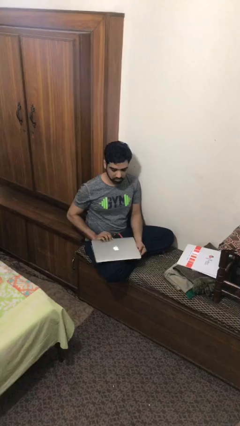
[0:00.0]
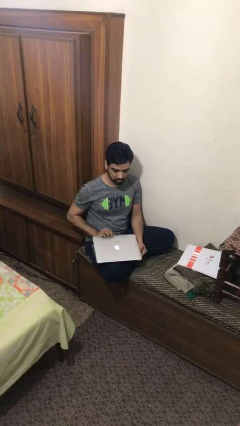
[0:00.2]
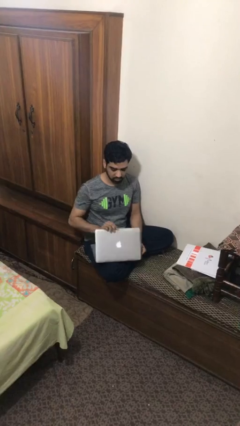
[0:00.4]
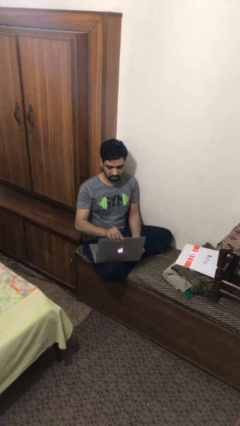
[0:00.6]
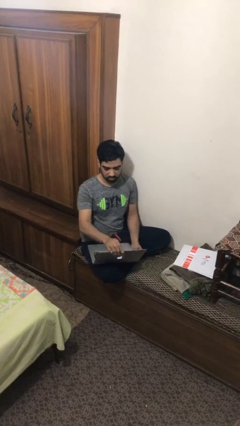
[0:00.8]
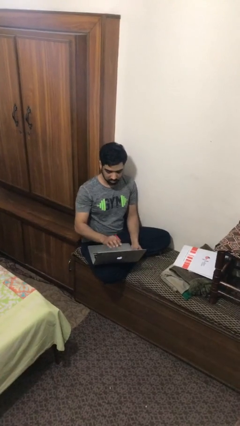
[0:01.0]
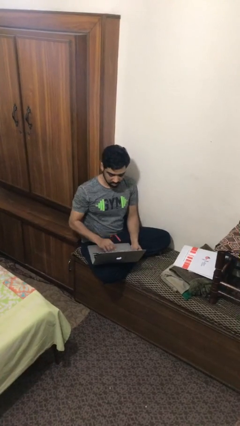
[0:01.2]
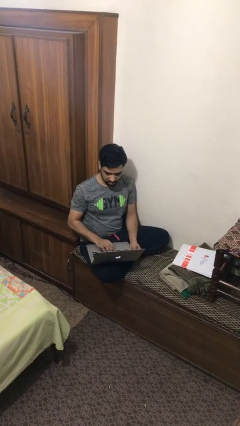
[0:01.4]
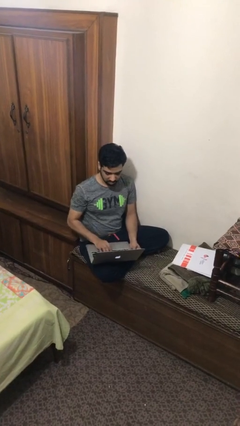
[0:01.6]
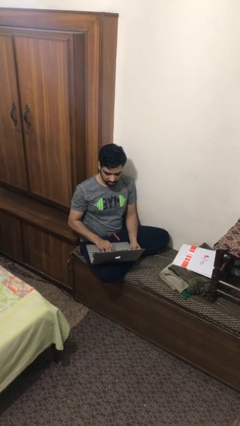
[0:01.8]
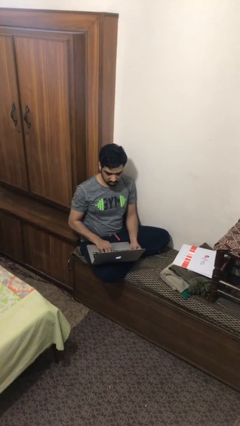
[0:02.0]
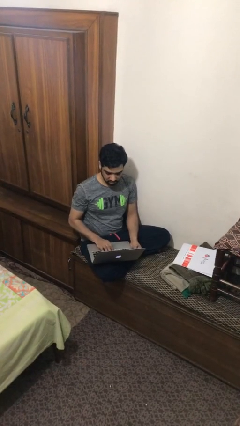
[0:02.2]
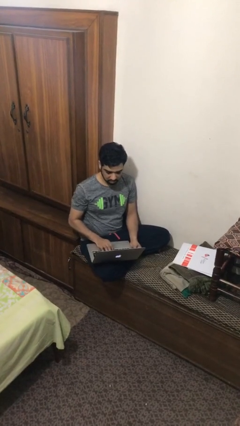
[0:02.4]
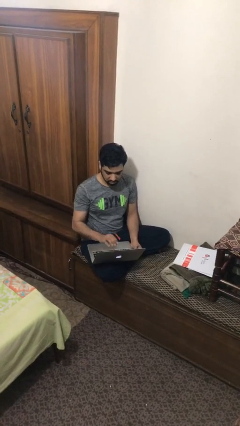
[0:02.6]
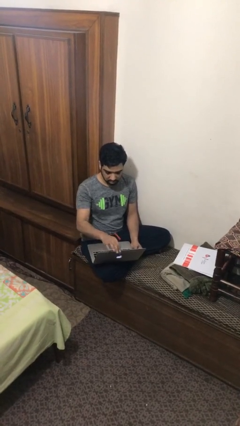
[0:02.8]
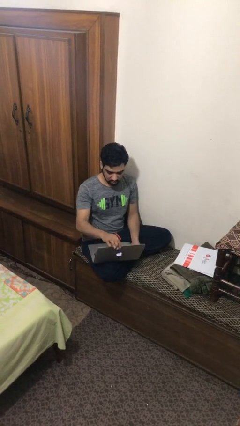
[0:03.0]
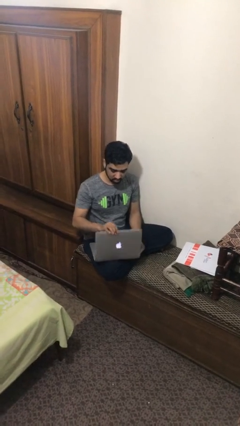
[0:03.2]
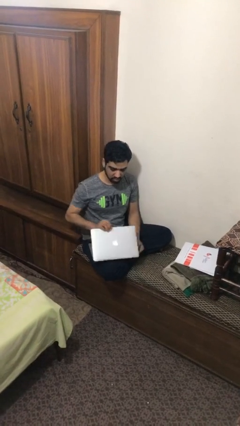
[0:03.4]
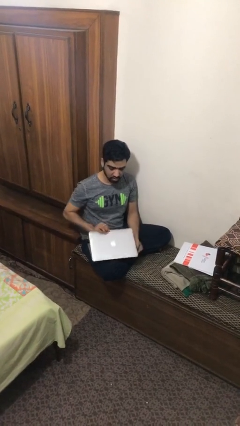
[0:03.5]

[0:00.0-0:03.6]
person interacts with laptop

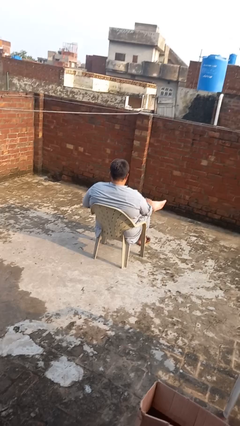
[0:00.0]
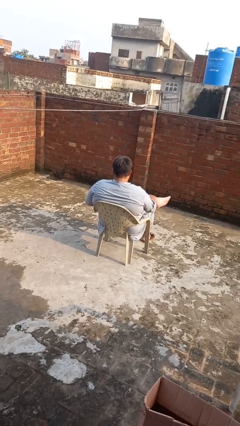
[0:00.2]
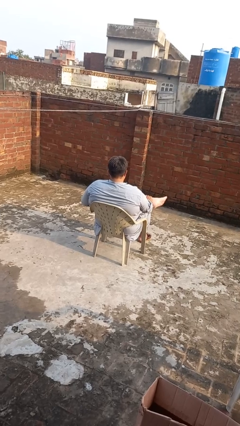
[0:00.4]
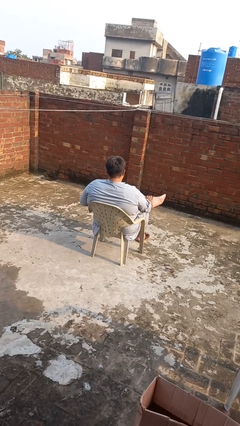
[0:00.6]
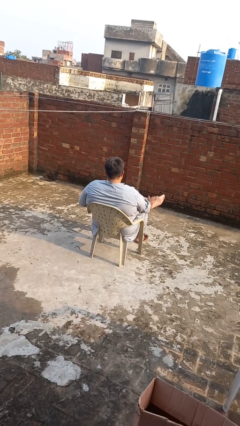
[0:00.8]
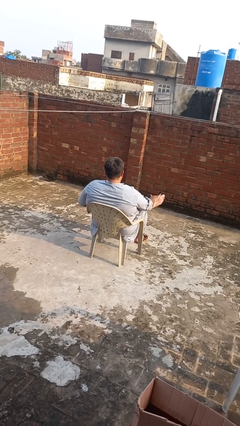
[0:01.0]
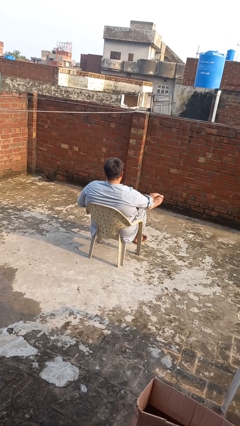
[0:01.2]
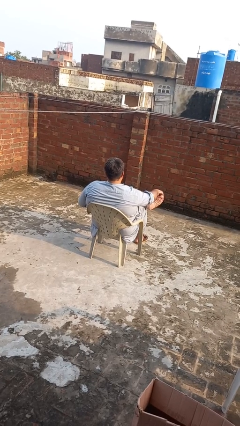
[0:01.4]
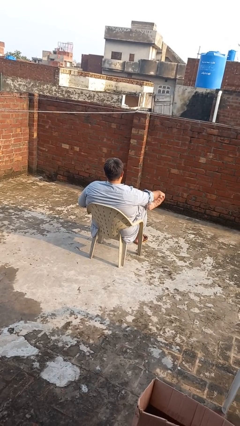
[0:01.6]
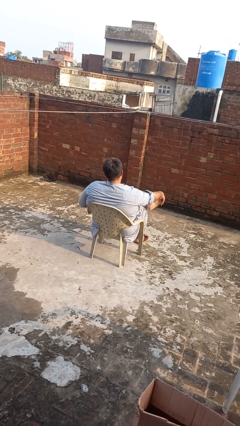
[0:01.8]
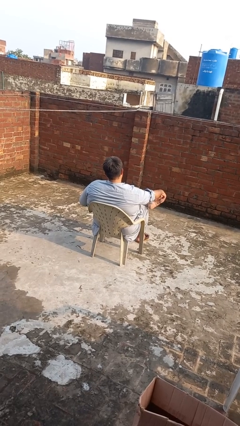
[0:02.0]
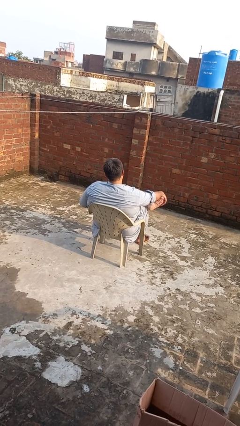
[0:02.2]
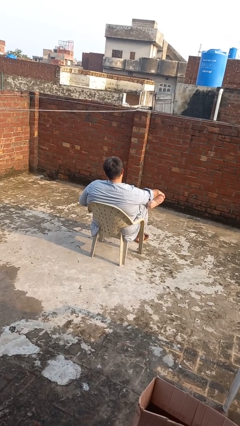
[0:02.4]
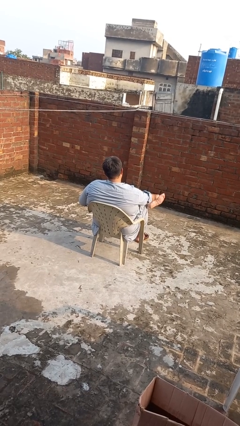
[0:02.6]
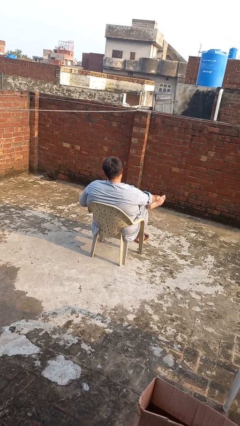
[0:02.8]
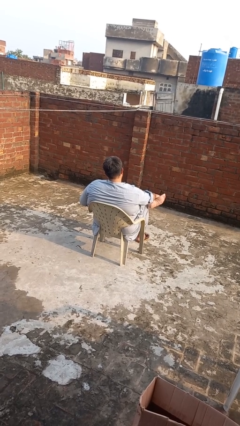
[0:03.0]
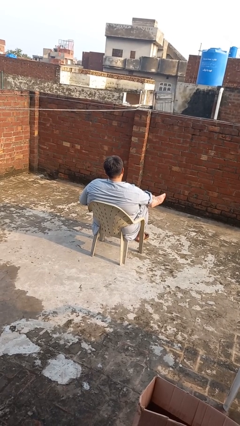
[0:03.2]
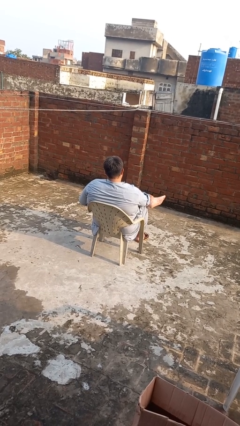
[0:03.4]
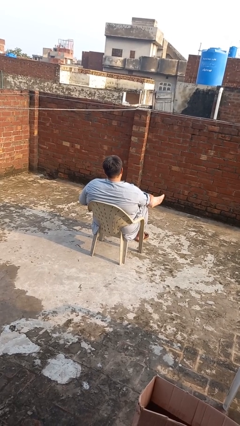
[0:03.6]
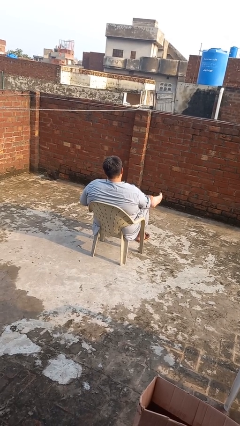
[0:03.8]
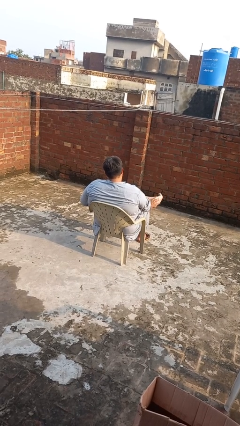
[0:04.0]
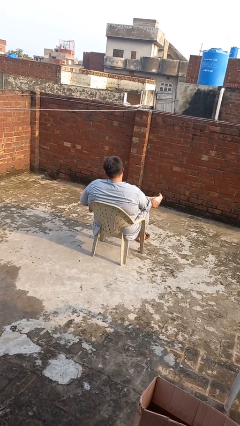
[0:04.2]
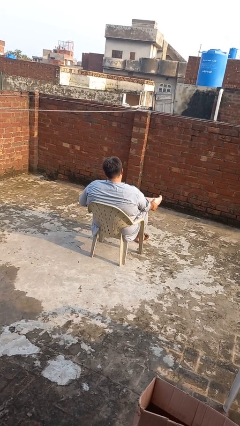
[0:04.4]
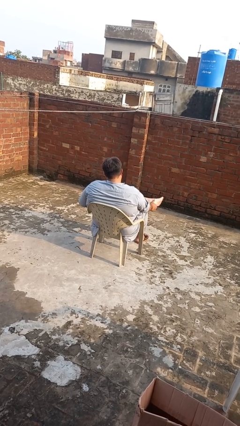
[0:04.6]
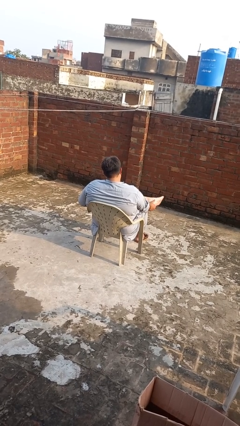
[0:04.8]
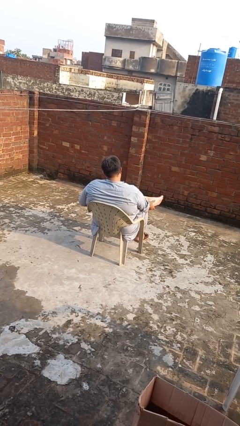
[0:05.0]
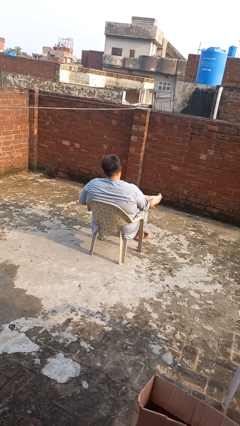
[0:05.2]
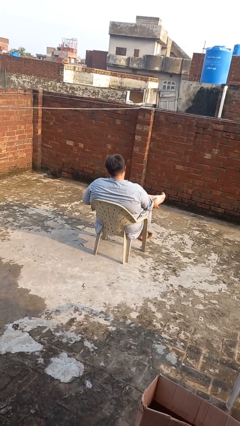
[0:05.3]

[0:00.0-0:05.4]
person rubs foot

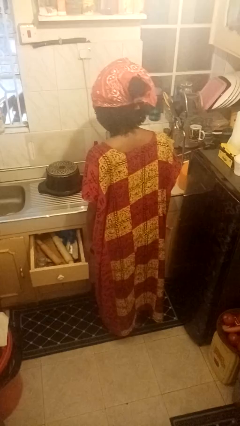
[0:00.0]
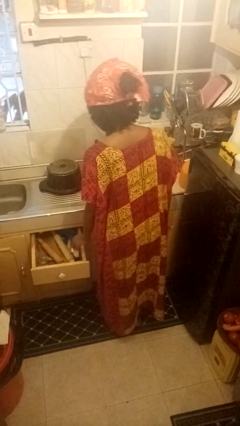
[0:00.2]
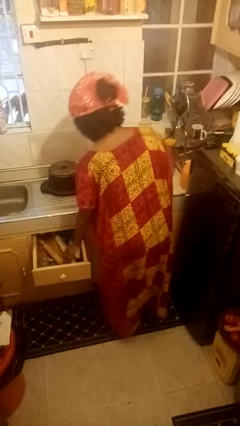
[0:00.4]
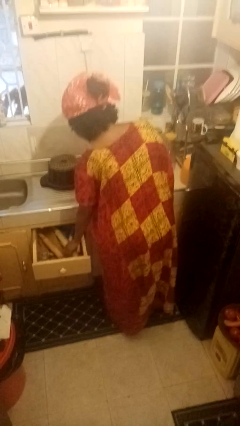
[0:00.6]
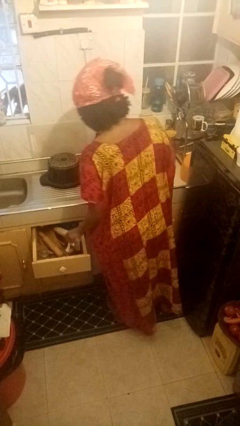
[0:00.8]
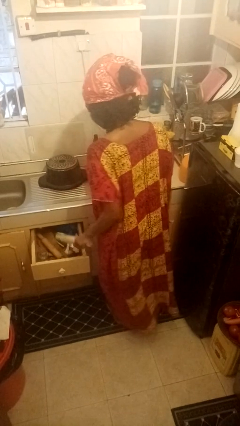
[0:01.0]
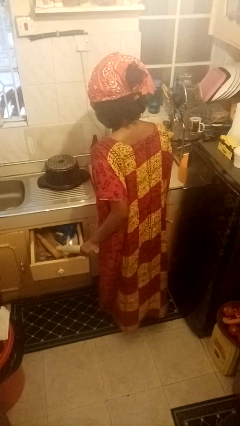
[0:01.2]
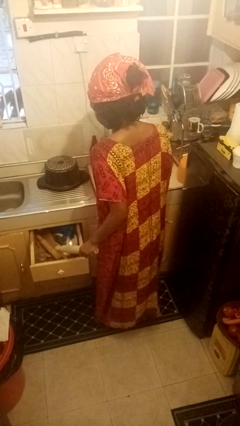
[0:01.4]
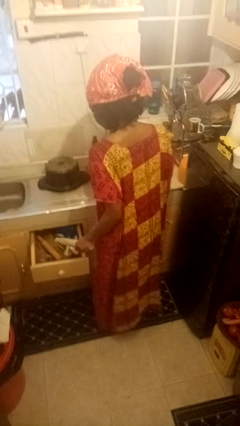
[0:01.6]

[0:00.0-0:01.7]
person takes object from kitchen drawer

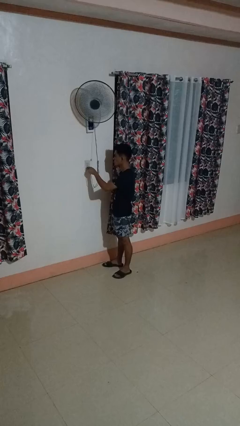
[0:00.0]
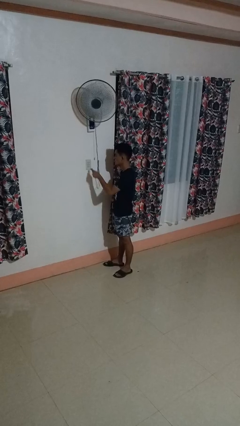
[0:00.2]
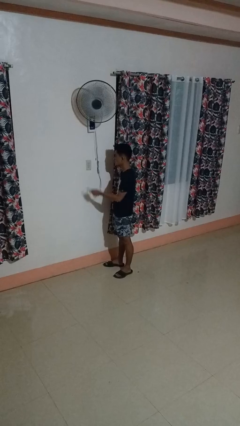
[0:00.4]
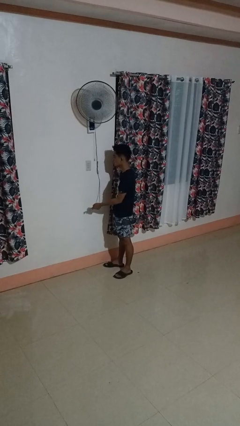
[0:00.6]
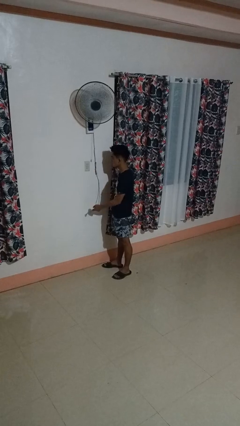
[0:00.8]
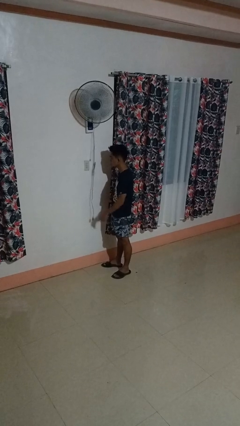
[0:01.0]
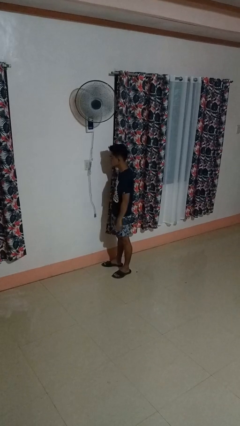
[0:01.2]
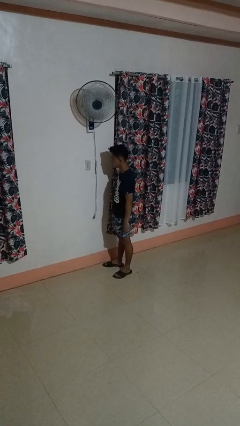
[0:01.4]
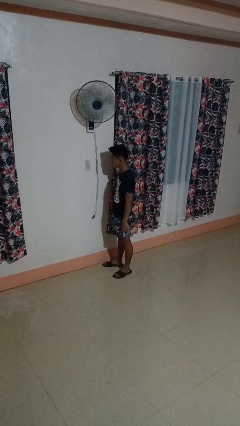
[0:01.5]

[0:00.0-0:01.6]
person unplugs from electrical socket

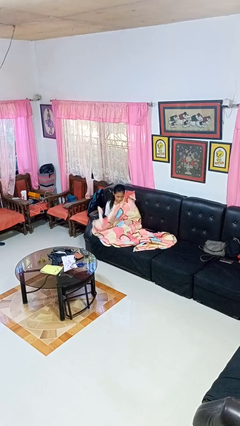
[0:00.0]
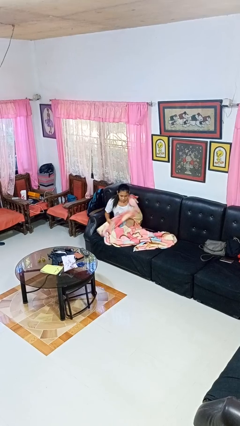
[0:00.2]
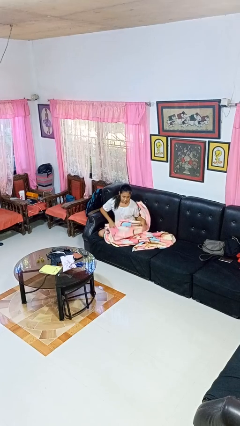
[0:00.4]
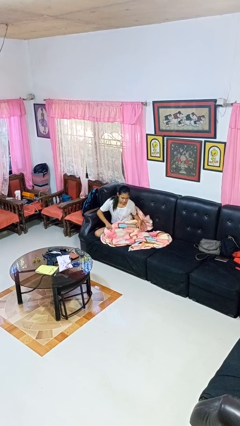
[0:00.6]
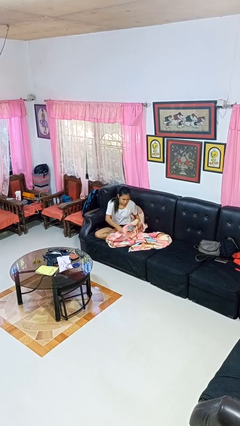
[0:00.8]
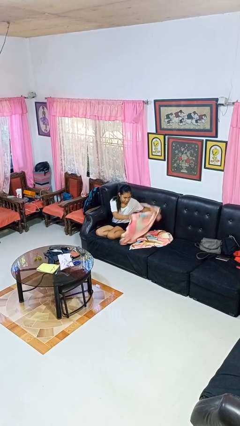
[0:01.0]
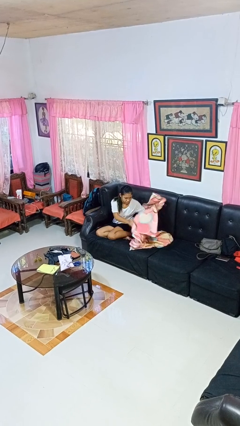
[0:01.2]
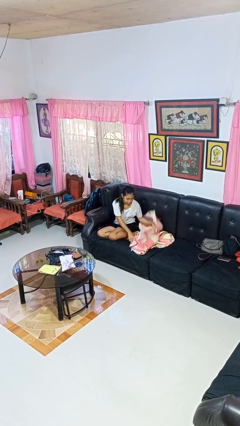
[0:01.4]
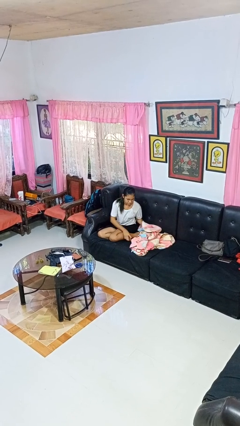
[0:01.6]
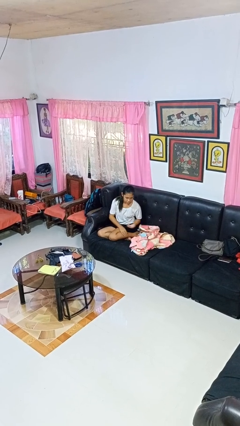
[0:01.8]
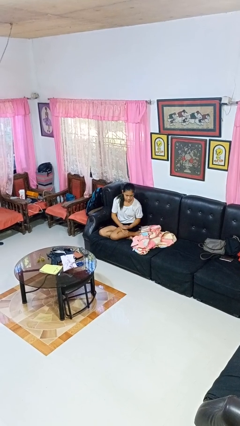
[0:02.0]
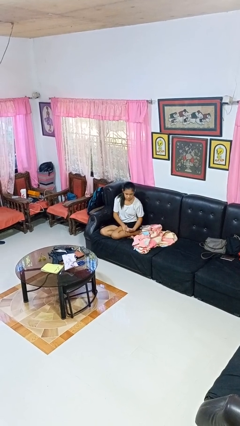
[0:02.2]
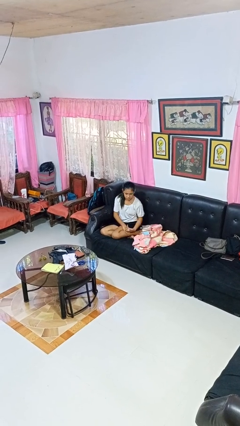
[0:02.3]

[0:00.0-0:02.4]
person uncovers with blanket

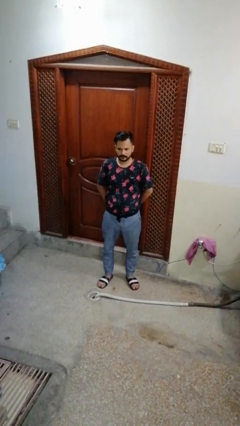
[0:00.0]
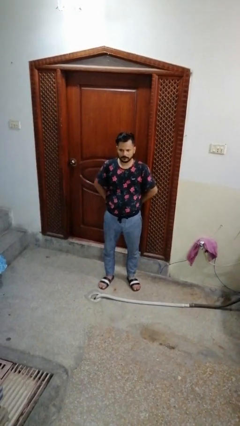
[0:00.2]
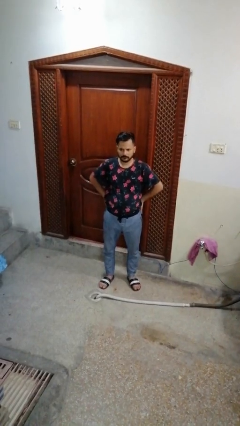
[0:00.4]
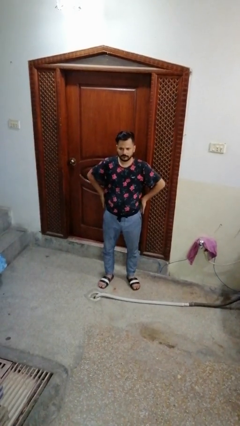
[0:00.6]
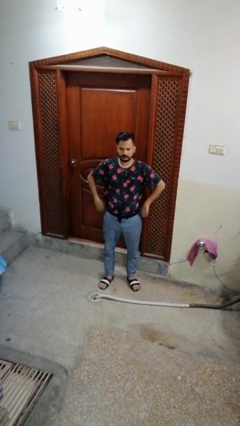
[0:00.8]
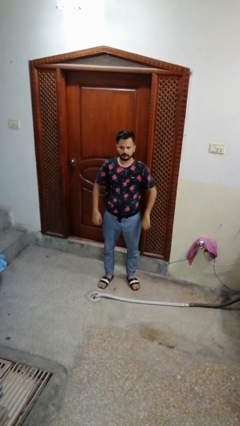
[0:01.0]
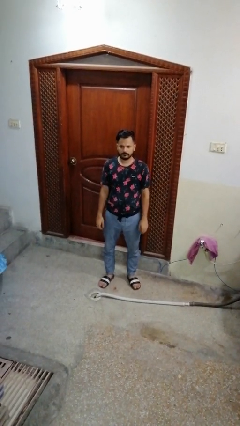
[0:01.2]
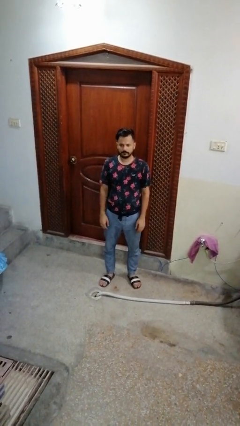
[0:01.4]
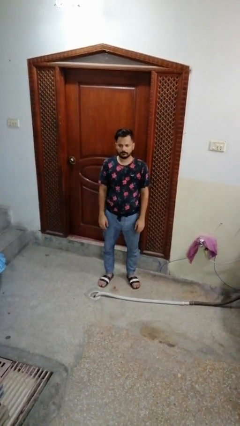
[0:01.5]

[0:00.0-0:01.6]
person puts hands in back pockets

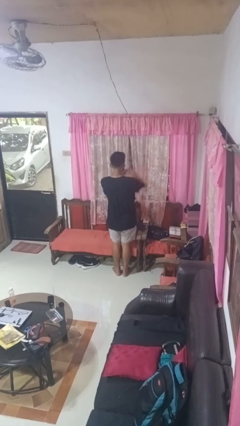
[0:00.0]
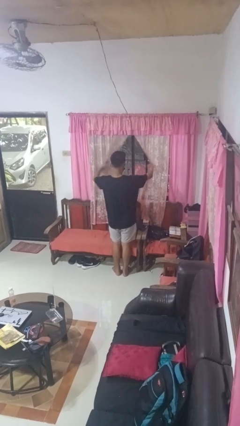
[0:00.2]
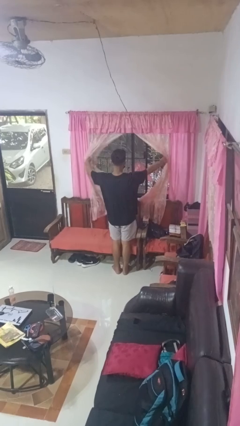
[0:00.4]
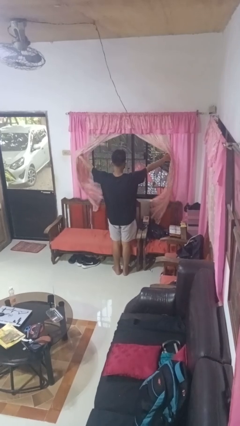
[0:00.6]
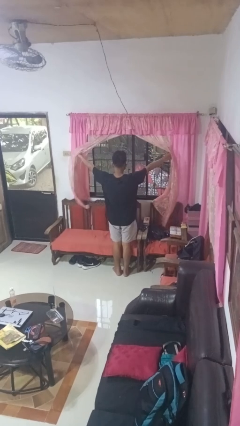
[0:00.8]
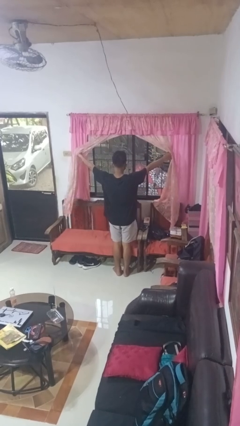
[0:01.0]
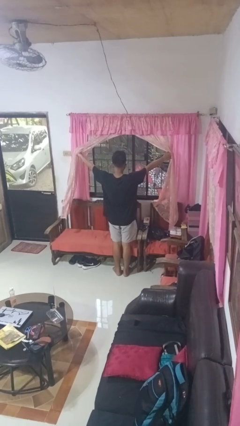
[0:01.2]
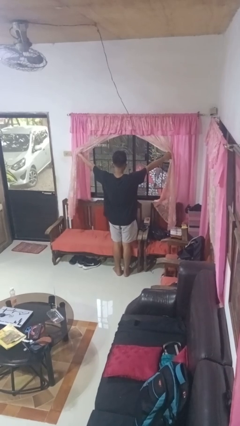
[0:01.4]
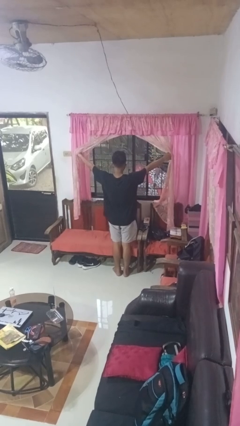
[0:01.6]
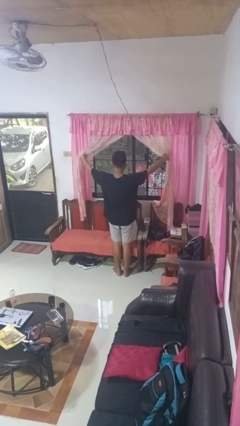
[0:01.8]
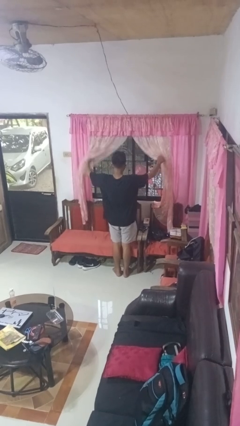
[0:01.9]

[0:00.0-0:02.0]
person opens curtains
